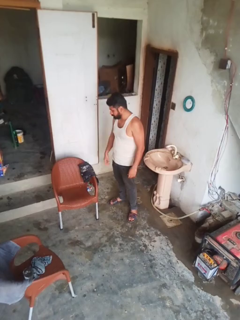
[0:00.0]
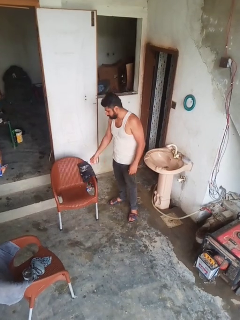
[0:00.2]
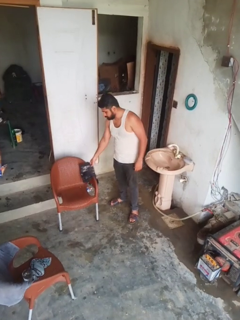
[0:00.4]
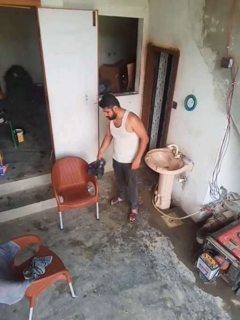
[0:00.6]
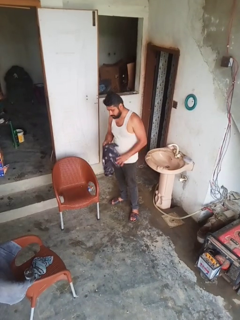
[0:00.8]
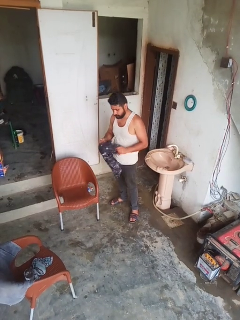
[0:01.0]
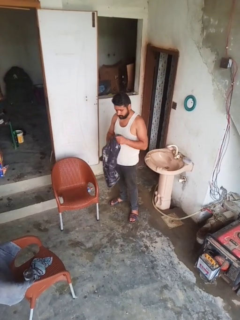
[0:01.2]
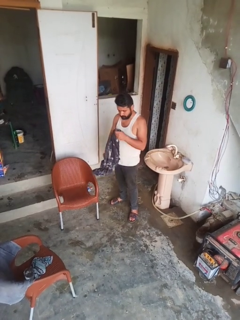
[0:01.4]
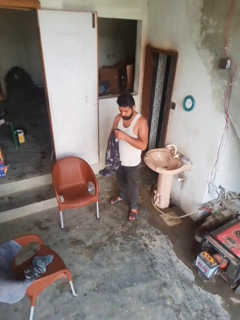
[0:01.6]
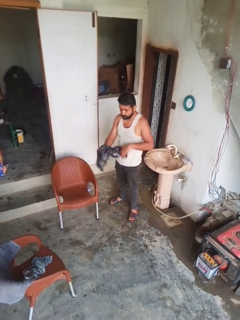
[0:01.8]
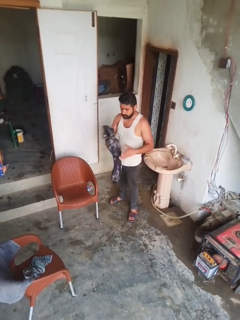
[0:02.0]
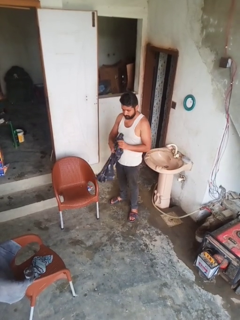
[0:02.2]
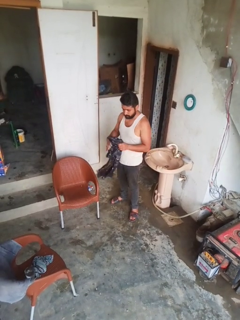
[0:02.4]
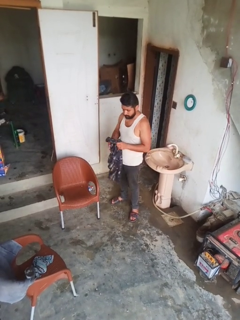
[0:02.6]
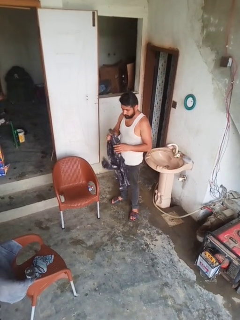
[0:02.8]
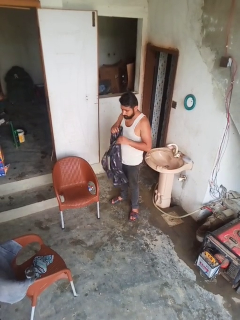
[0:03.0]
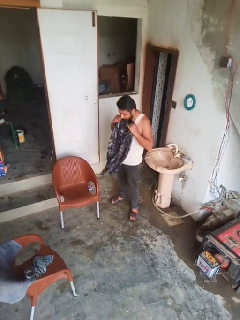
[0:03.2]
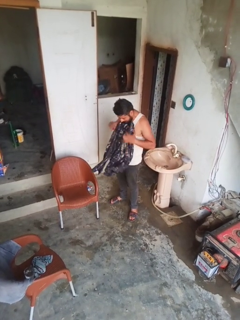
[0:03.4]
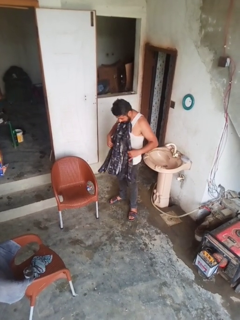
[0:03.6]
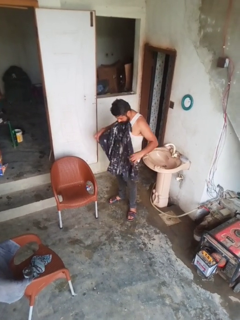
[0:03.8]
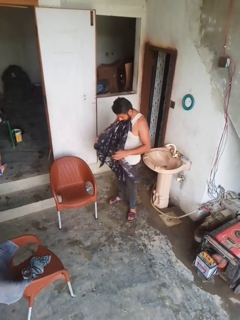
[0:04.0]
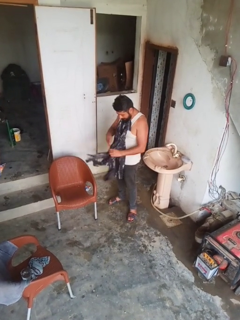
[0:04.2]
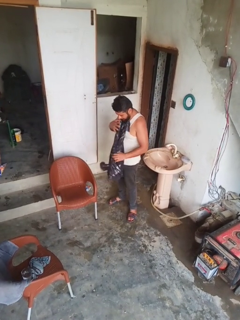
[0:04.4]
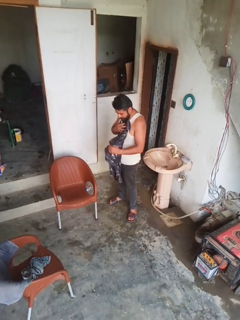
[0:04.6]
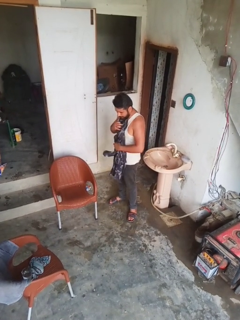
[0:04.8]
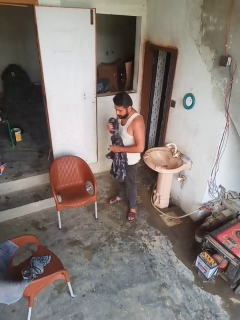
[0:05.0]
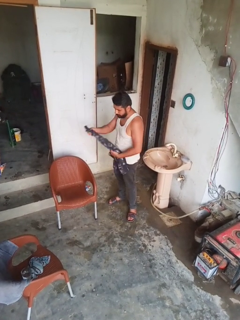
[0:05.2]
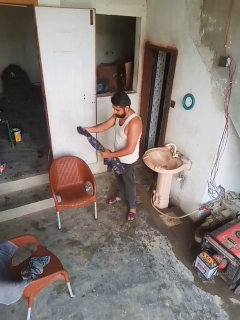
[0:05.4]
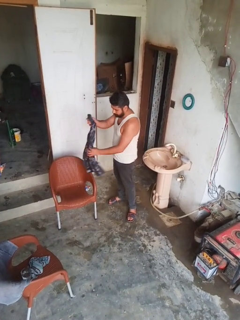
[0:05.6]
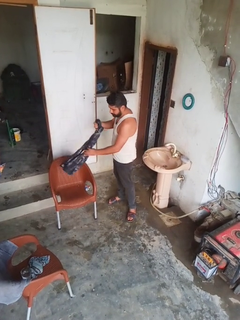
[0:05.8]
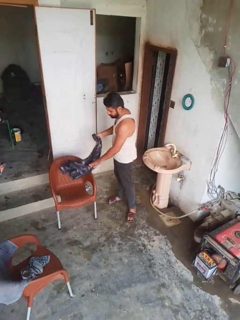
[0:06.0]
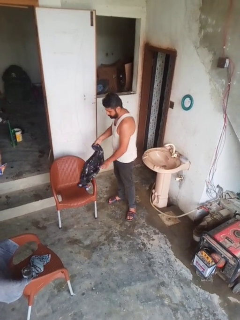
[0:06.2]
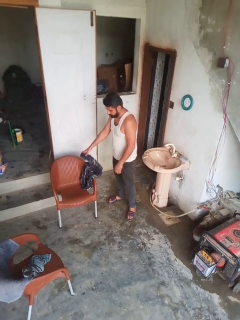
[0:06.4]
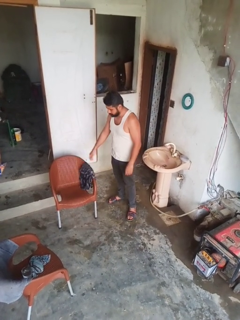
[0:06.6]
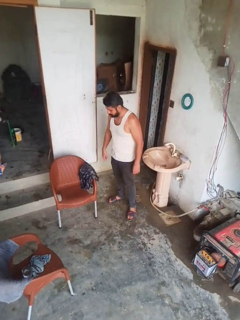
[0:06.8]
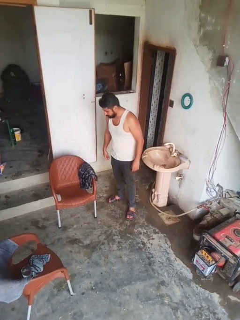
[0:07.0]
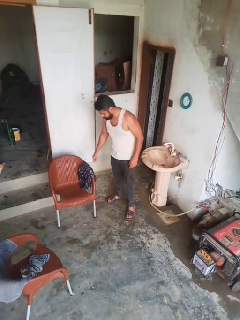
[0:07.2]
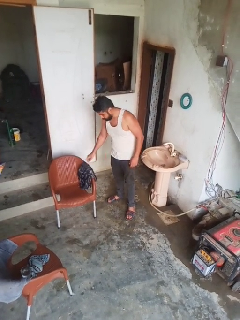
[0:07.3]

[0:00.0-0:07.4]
person folds shirt

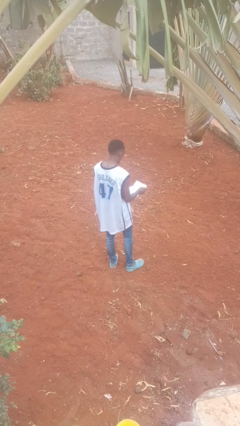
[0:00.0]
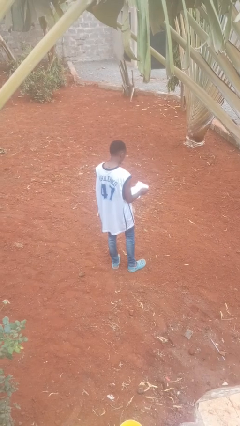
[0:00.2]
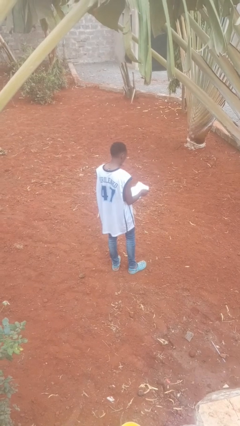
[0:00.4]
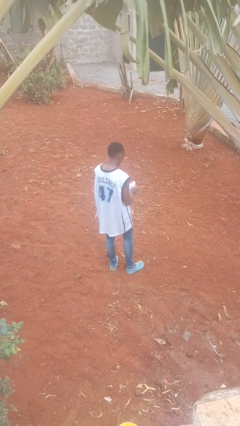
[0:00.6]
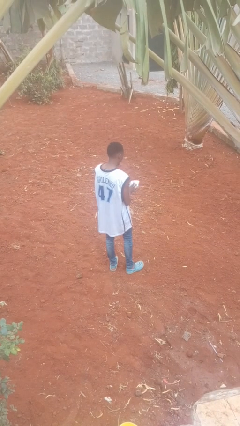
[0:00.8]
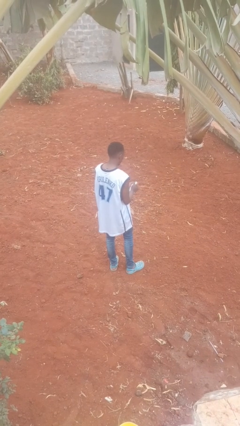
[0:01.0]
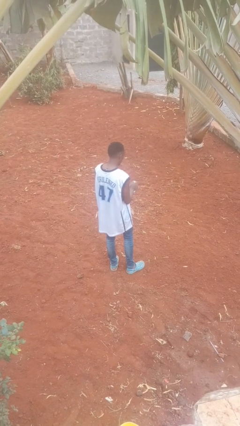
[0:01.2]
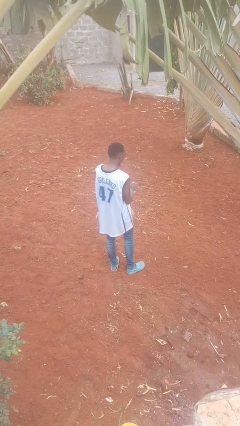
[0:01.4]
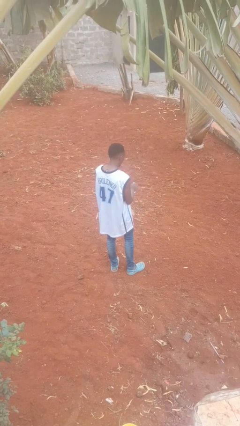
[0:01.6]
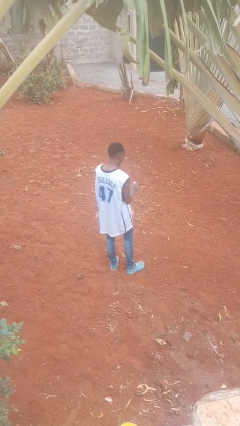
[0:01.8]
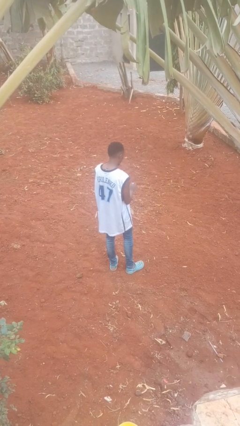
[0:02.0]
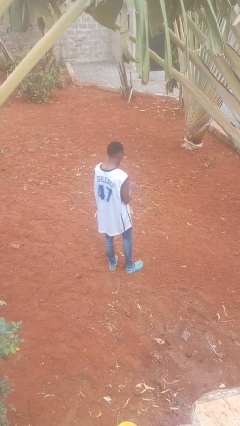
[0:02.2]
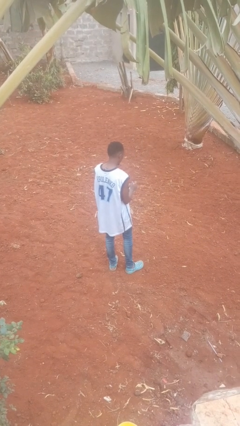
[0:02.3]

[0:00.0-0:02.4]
person crumples paper

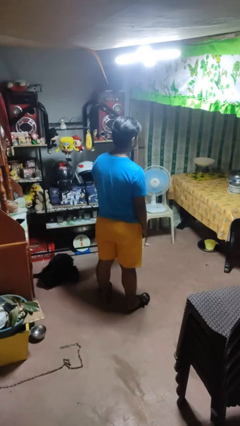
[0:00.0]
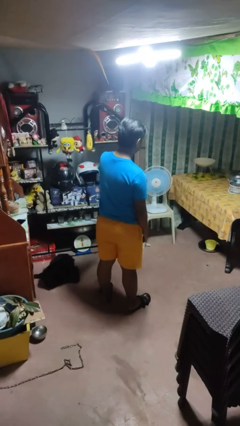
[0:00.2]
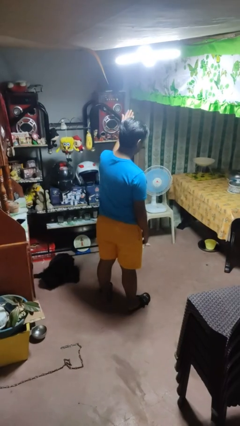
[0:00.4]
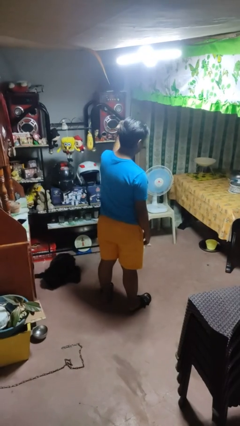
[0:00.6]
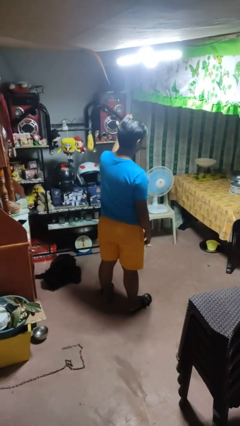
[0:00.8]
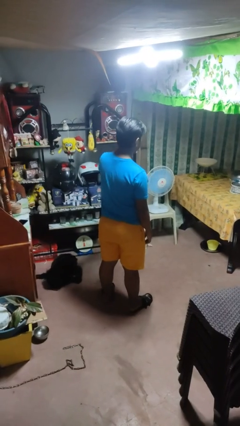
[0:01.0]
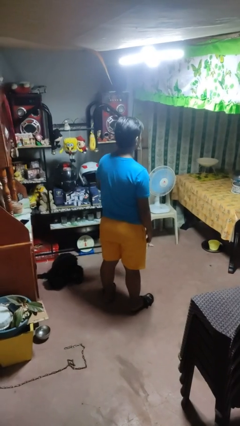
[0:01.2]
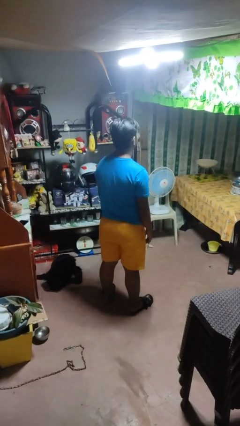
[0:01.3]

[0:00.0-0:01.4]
person gestures come here

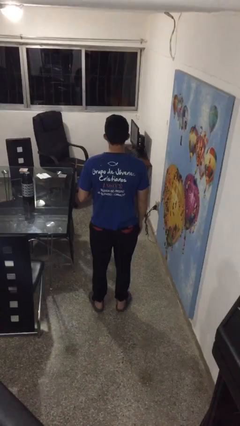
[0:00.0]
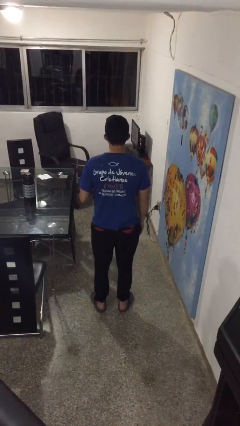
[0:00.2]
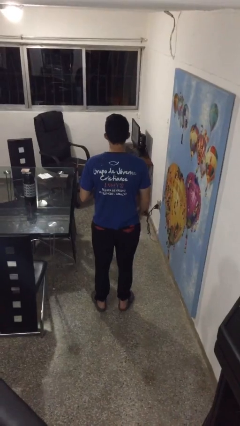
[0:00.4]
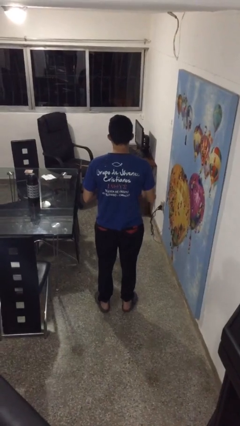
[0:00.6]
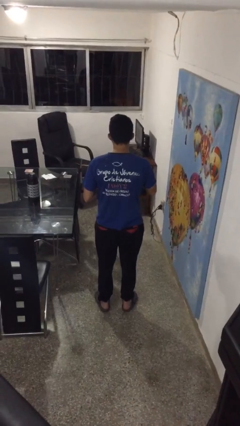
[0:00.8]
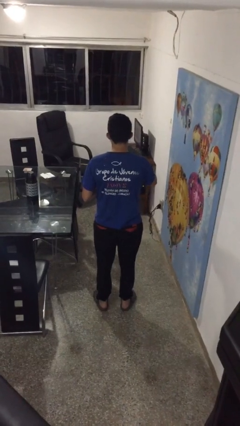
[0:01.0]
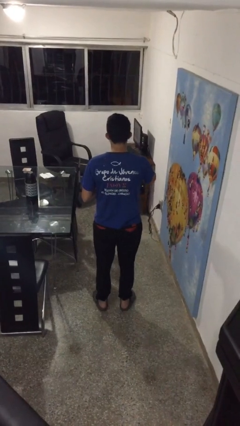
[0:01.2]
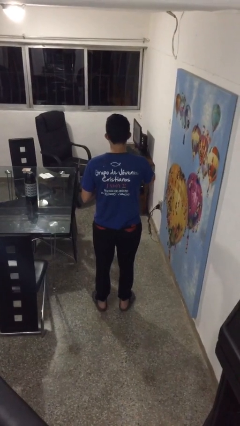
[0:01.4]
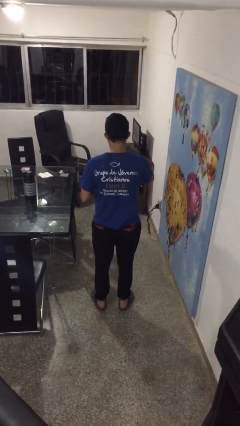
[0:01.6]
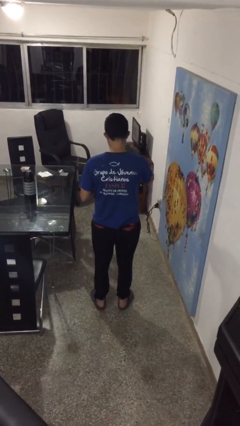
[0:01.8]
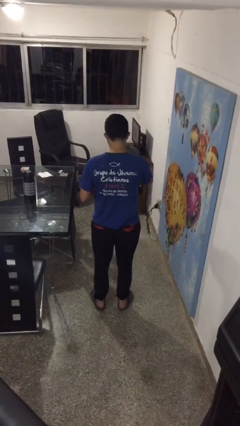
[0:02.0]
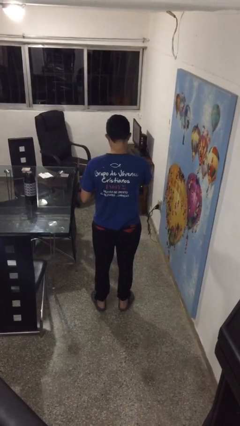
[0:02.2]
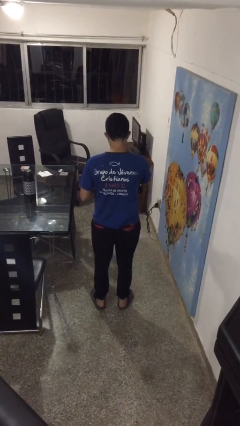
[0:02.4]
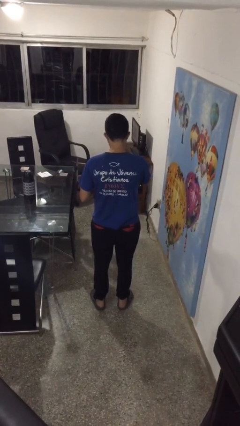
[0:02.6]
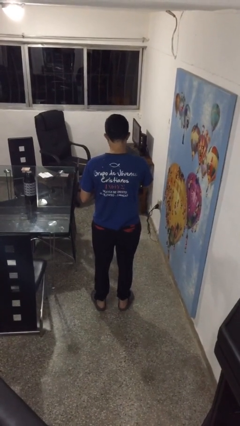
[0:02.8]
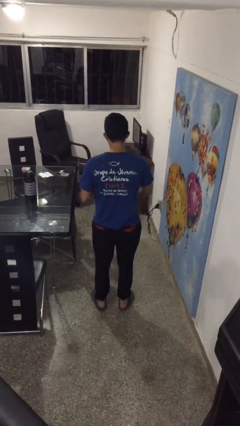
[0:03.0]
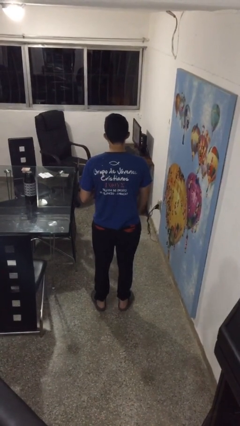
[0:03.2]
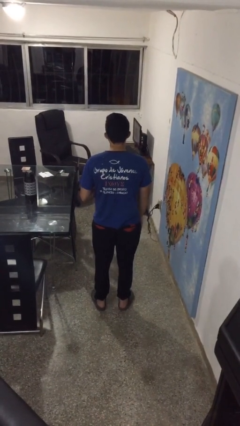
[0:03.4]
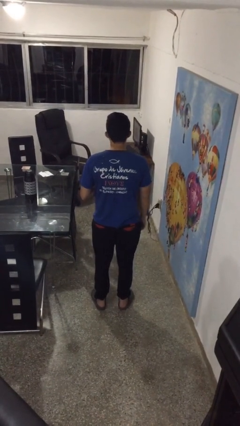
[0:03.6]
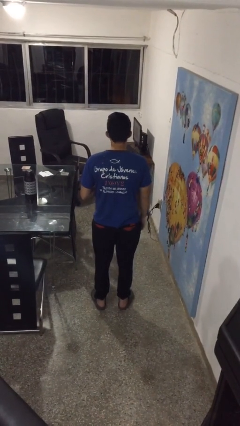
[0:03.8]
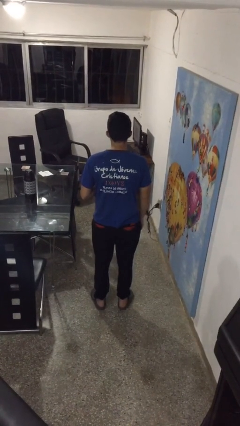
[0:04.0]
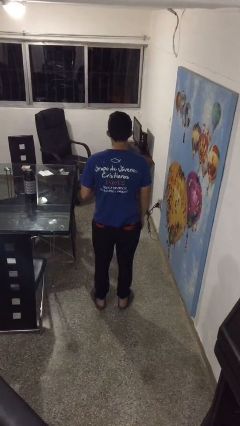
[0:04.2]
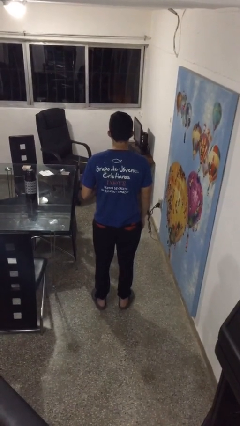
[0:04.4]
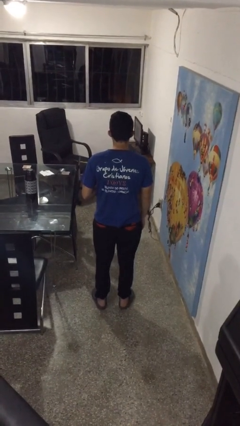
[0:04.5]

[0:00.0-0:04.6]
person eats snack from bag

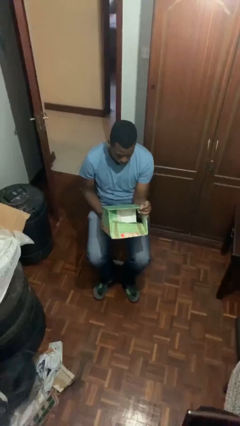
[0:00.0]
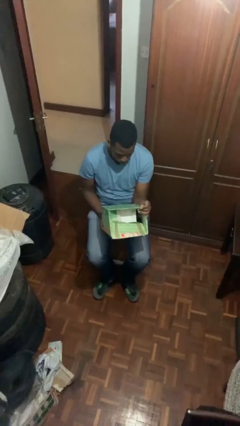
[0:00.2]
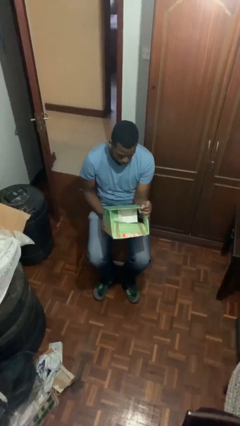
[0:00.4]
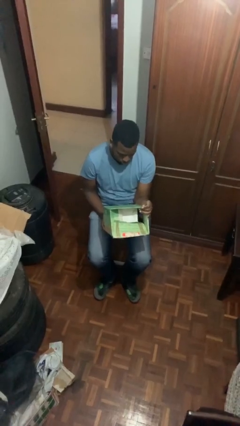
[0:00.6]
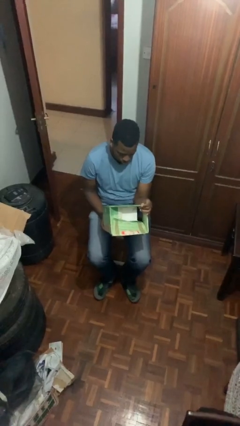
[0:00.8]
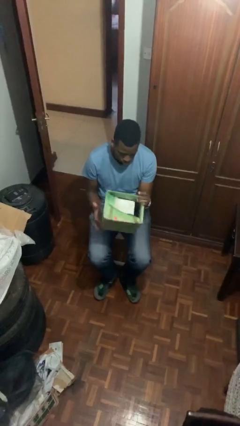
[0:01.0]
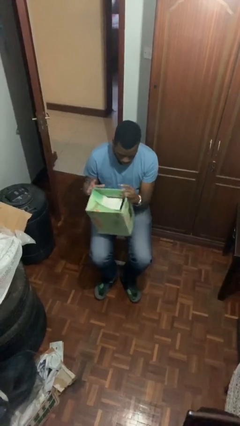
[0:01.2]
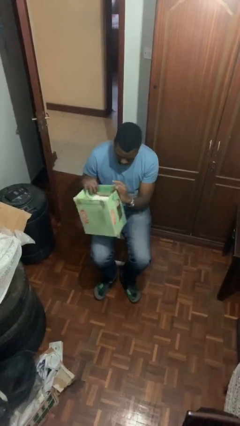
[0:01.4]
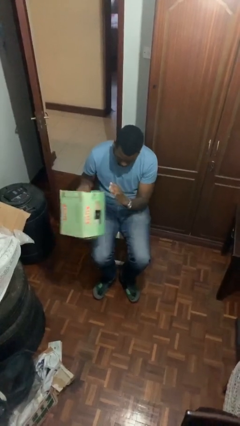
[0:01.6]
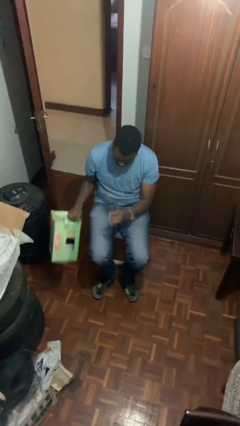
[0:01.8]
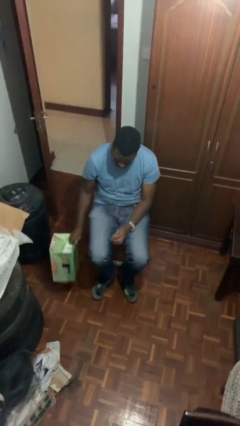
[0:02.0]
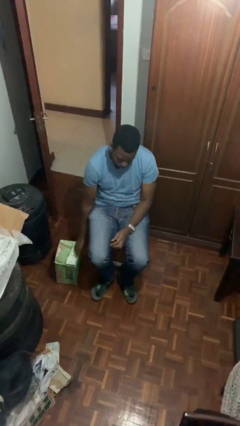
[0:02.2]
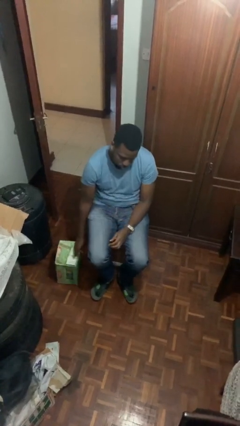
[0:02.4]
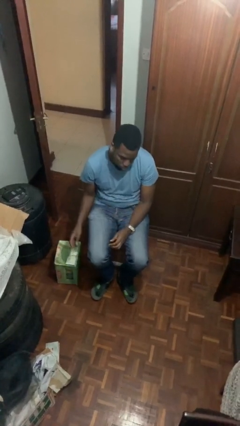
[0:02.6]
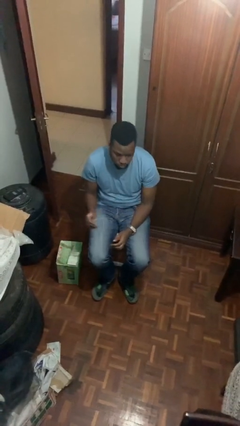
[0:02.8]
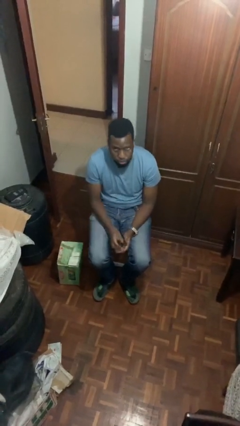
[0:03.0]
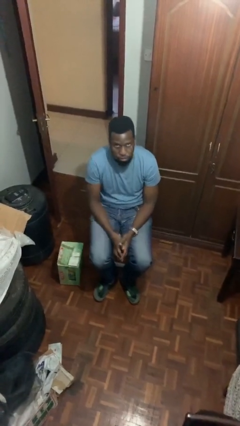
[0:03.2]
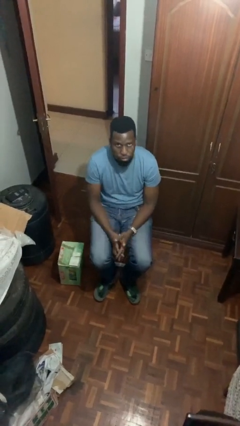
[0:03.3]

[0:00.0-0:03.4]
person puts down object on floor

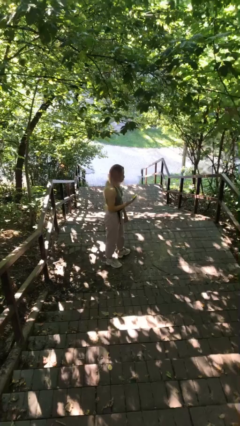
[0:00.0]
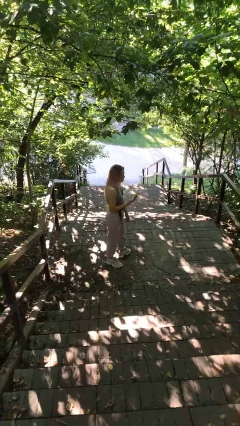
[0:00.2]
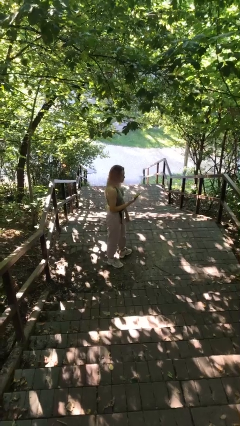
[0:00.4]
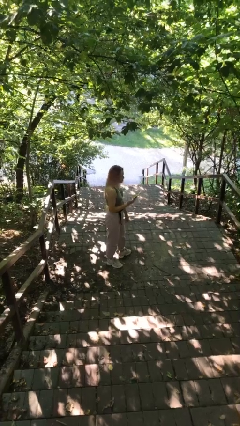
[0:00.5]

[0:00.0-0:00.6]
person takes phone from pocket
